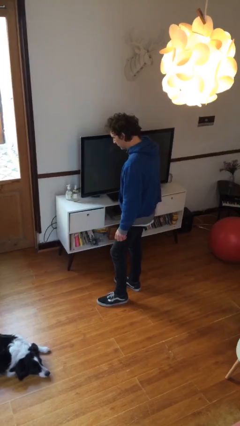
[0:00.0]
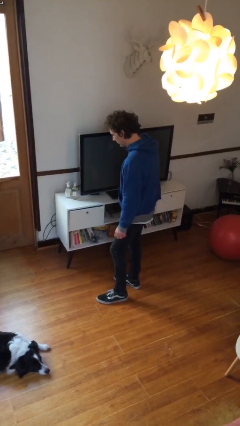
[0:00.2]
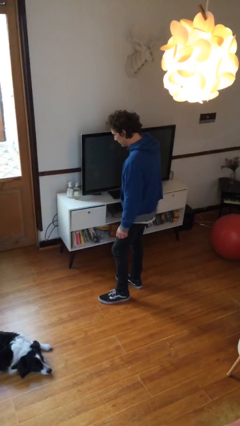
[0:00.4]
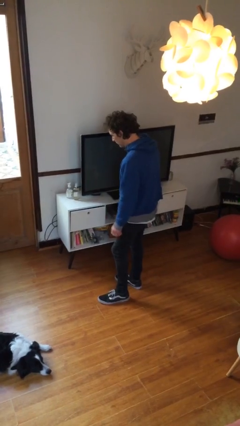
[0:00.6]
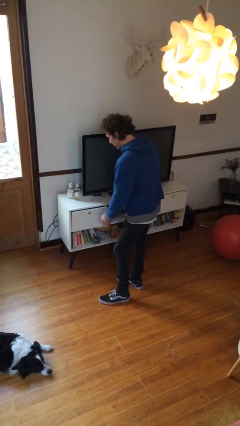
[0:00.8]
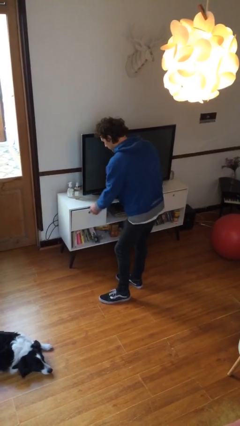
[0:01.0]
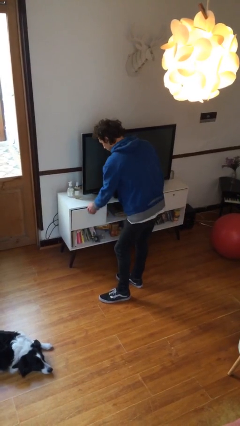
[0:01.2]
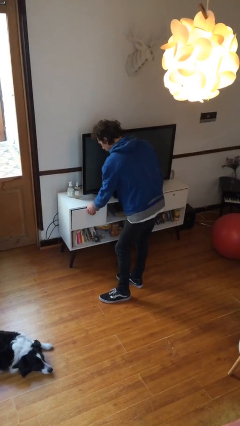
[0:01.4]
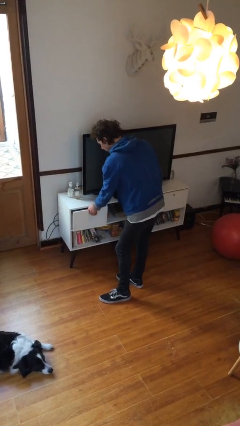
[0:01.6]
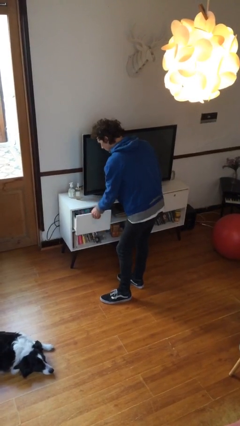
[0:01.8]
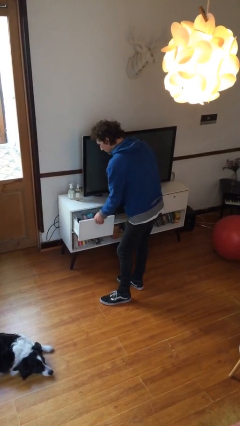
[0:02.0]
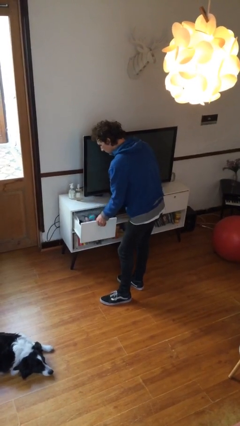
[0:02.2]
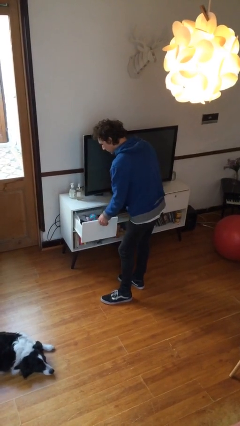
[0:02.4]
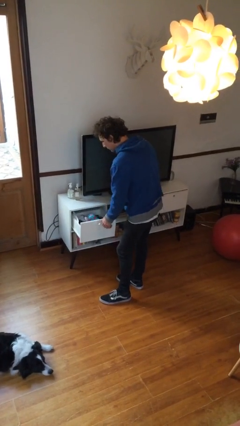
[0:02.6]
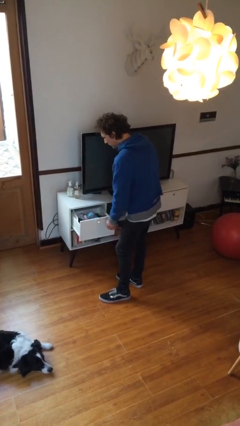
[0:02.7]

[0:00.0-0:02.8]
person opens dresser drawer

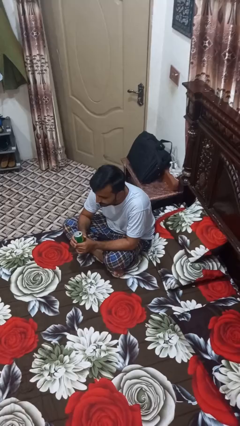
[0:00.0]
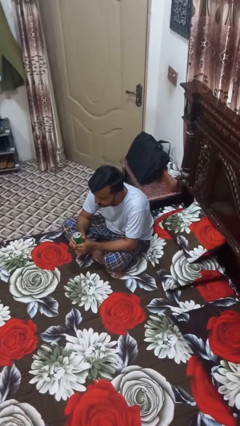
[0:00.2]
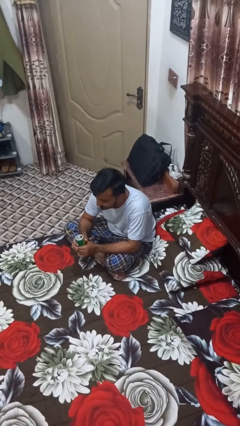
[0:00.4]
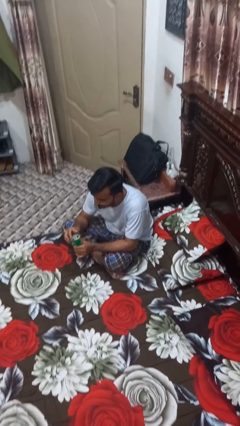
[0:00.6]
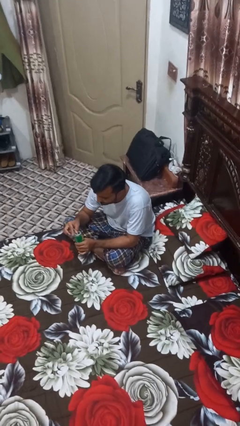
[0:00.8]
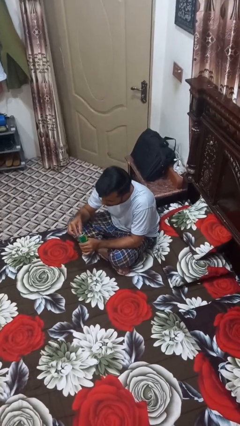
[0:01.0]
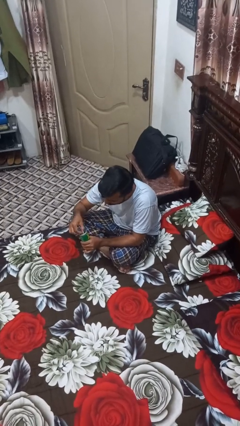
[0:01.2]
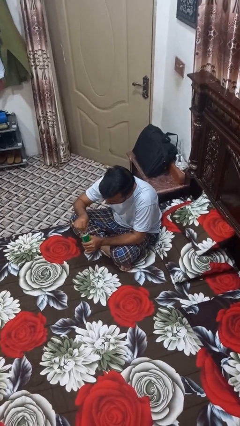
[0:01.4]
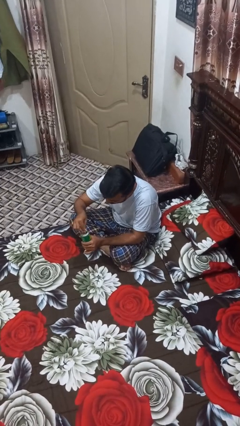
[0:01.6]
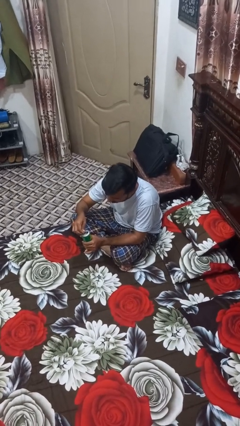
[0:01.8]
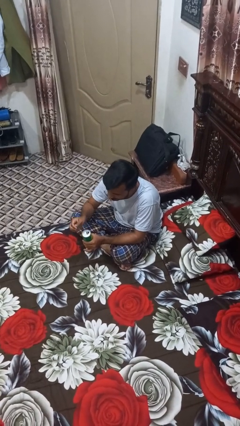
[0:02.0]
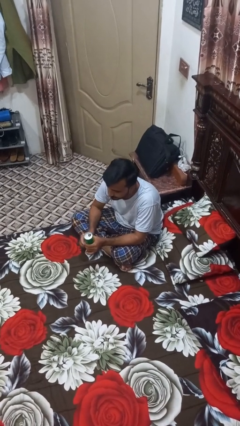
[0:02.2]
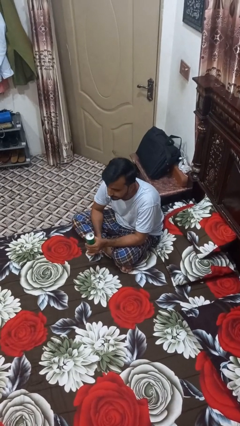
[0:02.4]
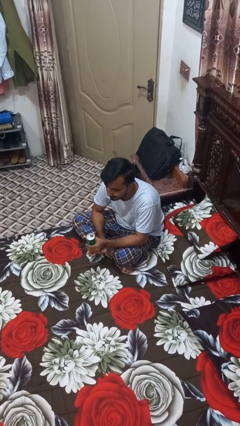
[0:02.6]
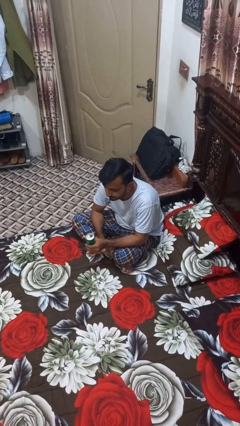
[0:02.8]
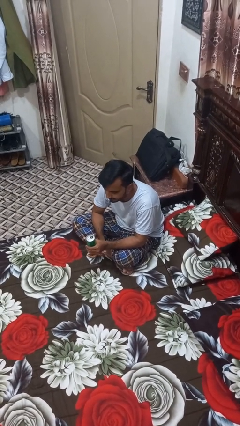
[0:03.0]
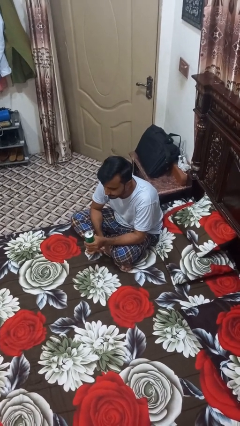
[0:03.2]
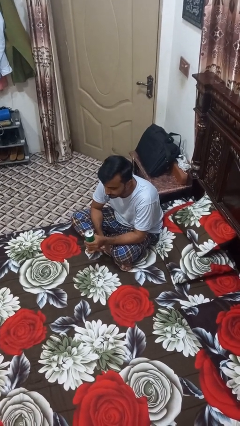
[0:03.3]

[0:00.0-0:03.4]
person opens can with can opener

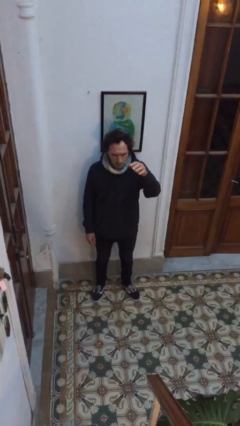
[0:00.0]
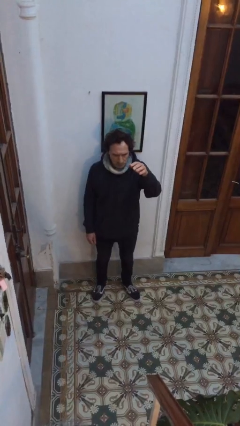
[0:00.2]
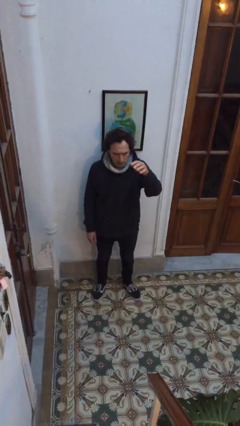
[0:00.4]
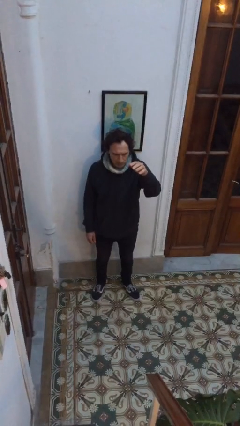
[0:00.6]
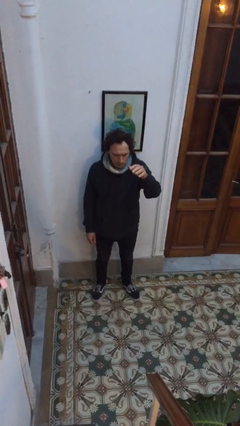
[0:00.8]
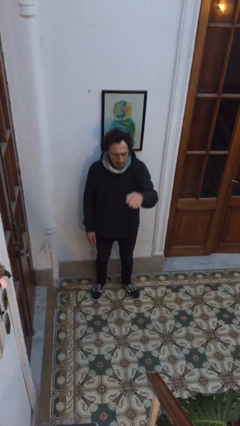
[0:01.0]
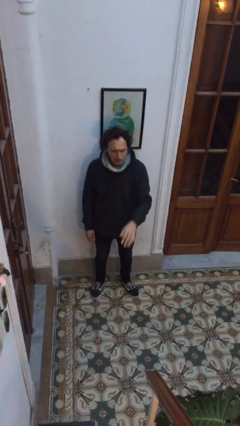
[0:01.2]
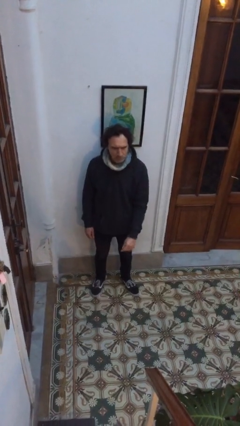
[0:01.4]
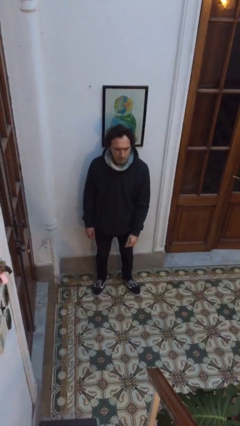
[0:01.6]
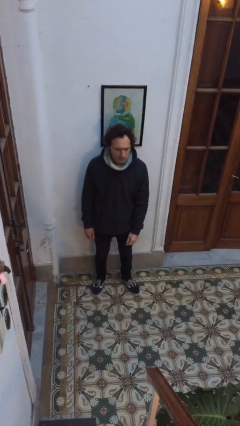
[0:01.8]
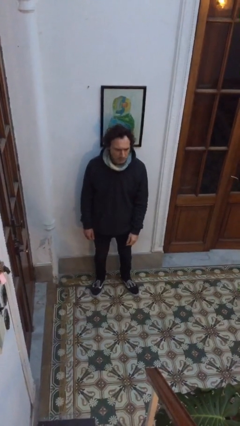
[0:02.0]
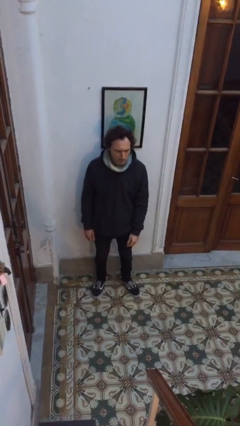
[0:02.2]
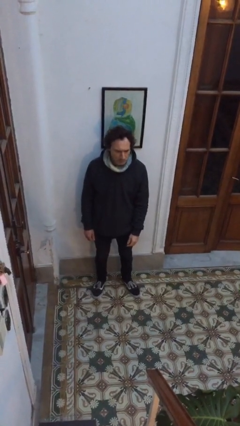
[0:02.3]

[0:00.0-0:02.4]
person gestures swipe down

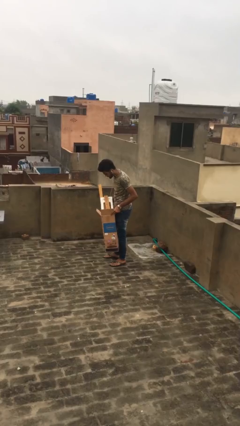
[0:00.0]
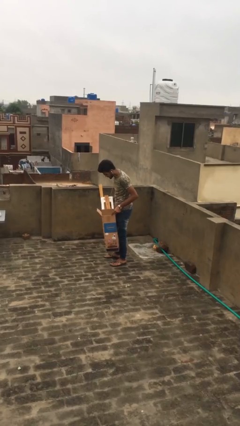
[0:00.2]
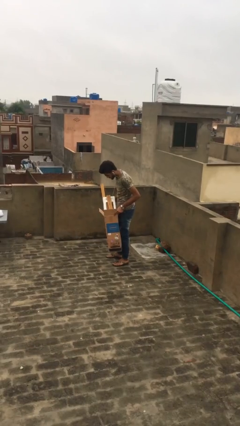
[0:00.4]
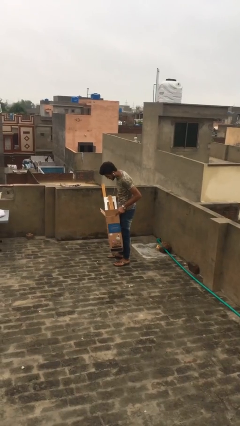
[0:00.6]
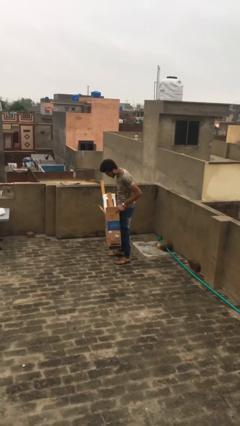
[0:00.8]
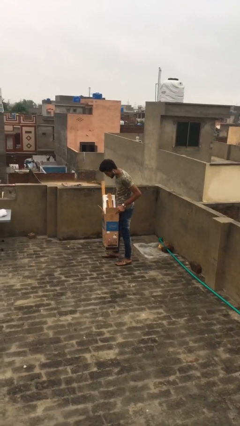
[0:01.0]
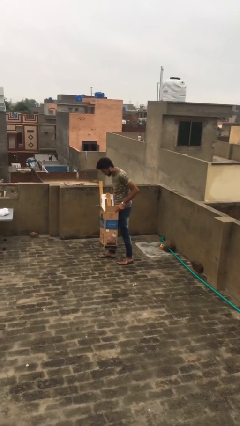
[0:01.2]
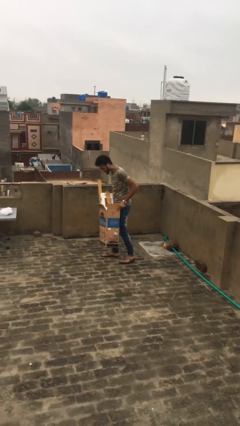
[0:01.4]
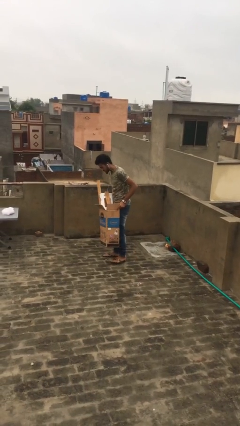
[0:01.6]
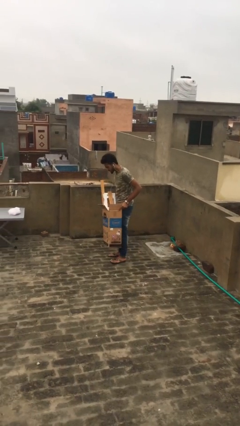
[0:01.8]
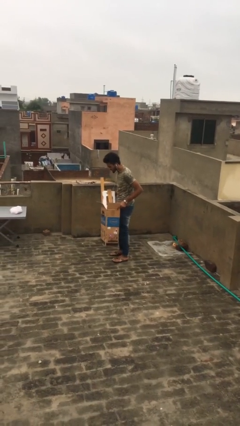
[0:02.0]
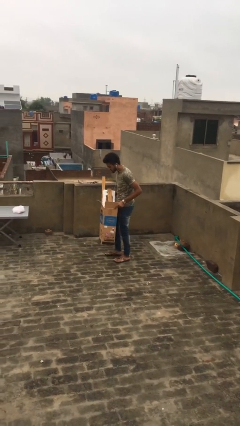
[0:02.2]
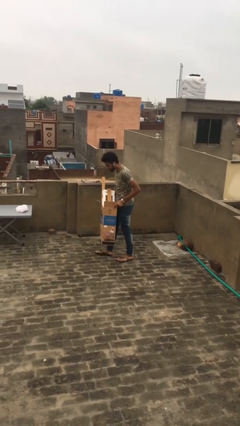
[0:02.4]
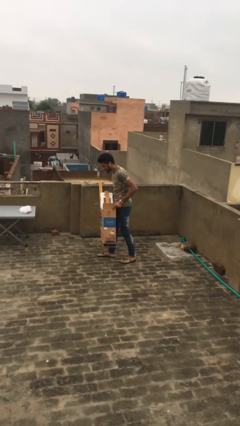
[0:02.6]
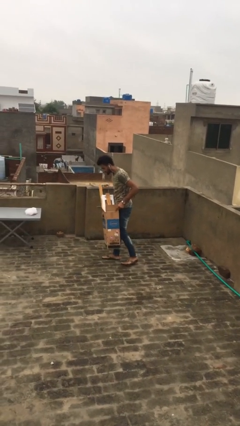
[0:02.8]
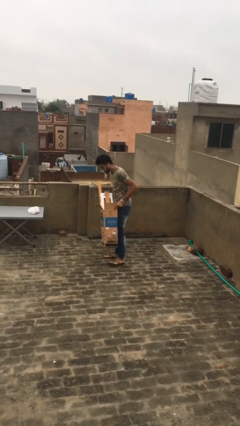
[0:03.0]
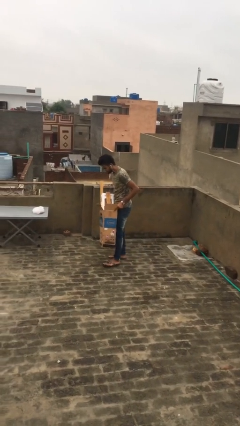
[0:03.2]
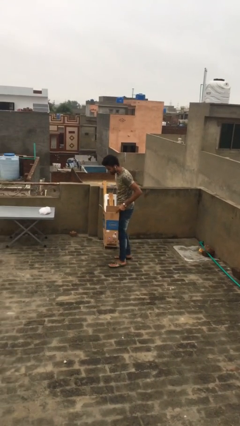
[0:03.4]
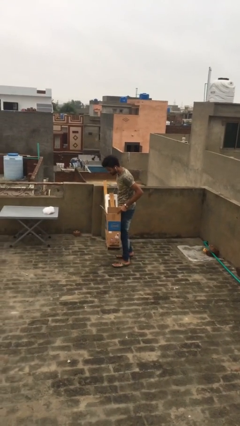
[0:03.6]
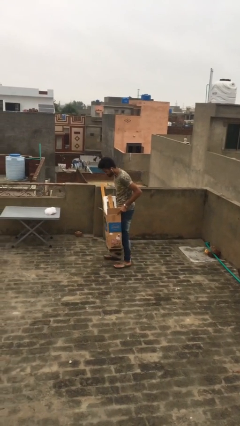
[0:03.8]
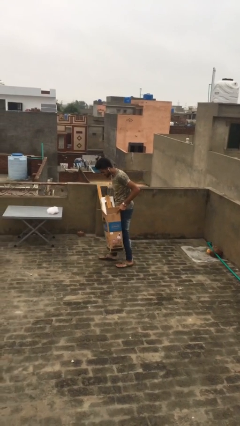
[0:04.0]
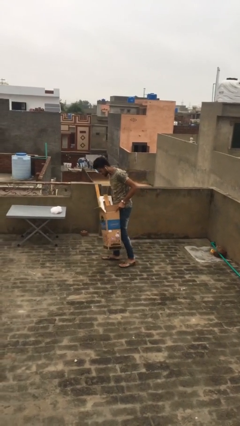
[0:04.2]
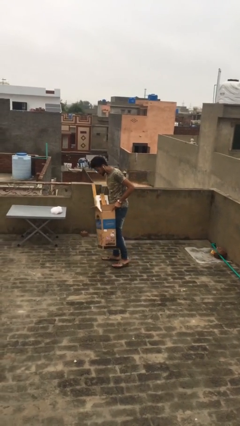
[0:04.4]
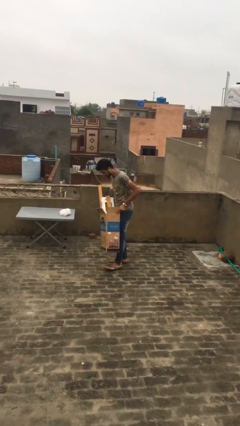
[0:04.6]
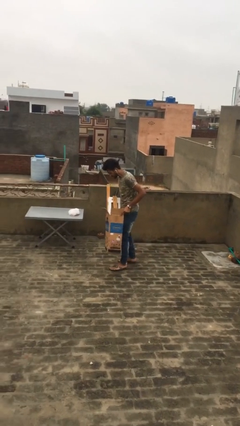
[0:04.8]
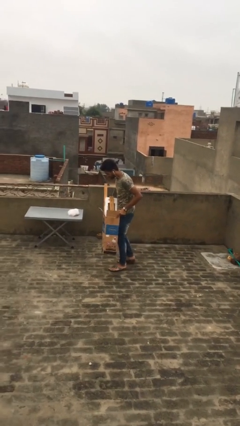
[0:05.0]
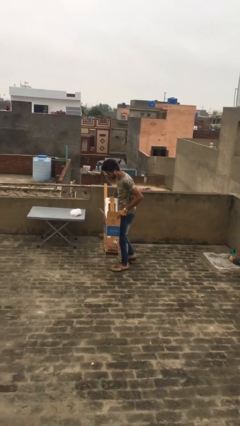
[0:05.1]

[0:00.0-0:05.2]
person carries heavy object

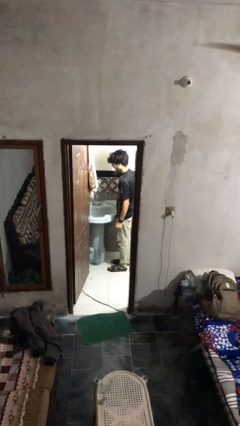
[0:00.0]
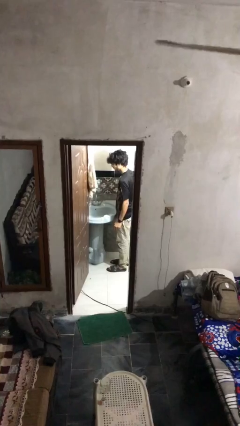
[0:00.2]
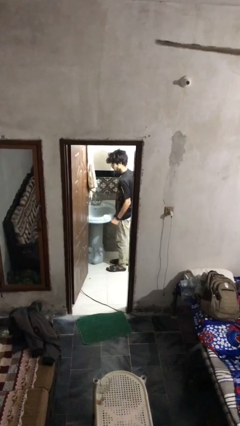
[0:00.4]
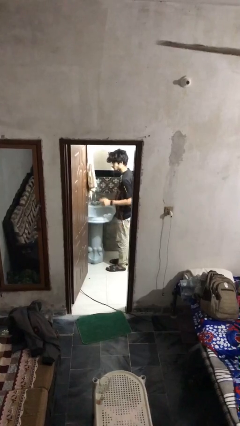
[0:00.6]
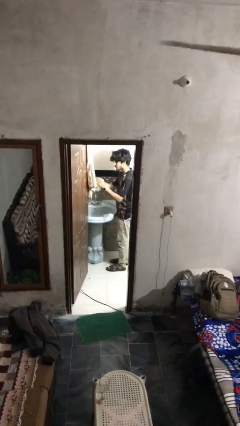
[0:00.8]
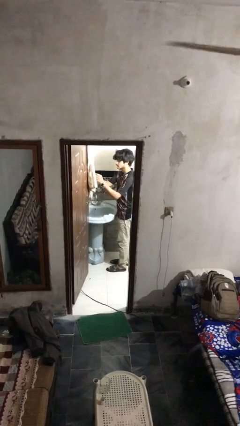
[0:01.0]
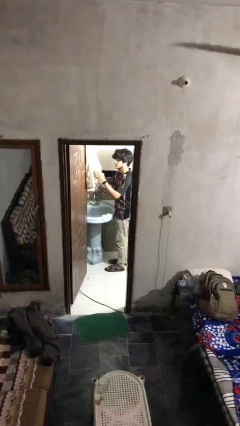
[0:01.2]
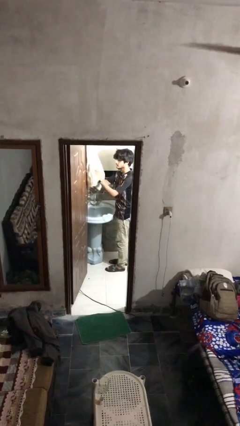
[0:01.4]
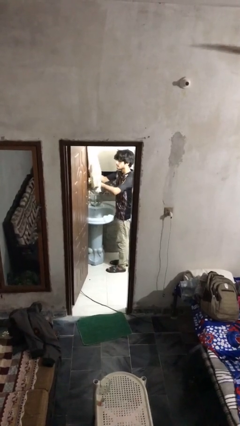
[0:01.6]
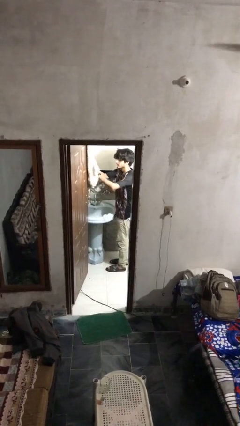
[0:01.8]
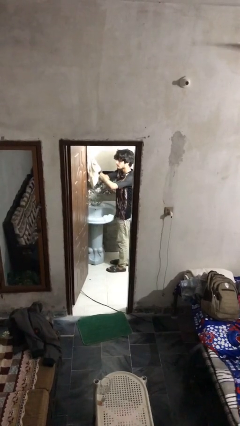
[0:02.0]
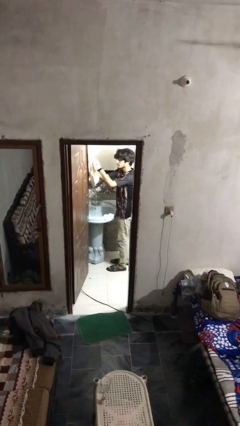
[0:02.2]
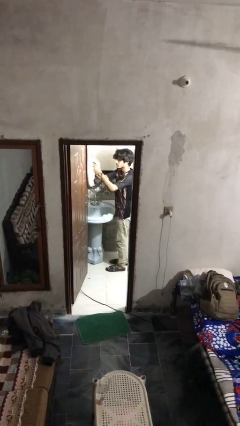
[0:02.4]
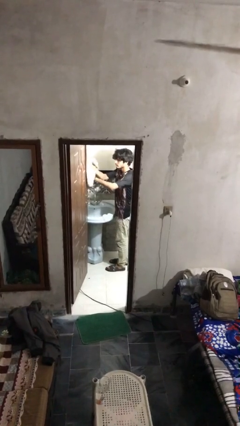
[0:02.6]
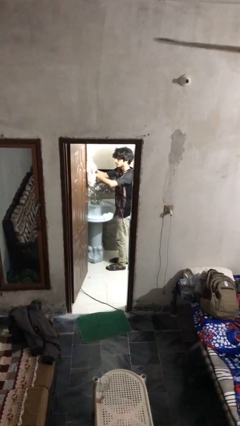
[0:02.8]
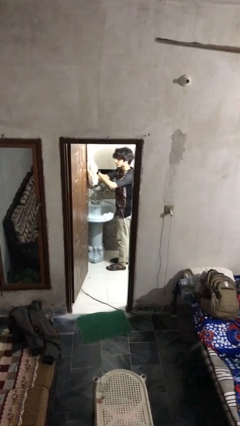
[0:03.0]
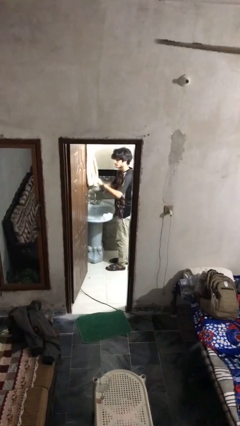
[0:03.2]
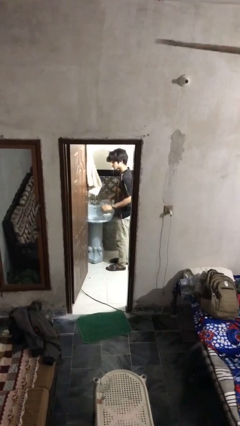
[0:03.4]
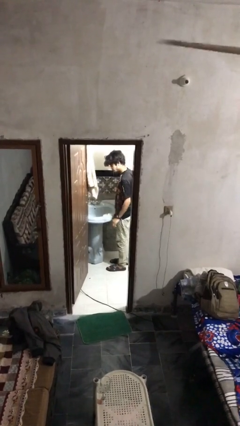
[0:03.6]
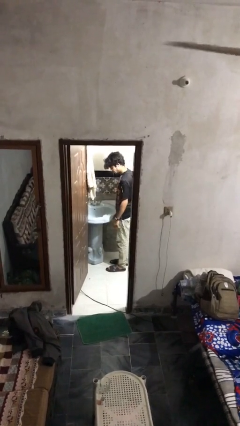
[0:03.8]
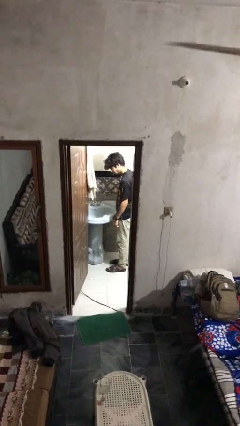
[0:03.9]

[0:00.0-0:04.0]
person dries hands with towel
